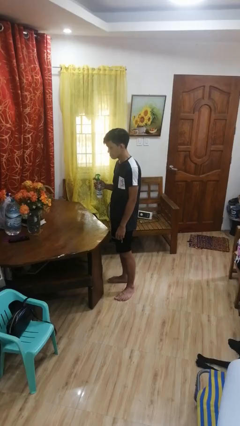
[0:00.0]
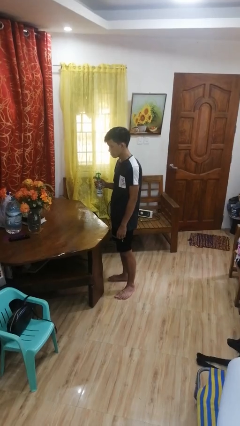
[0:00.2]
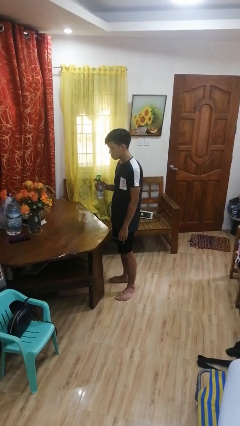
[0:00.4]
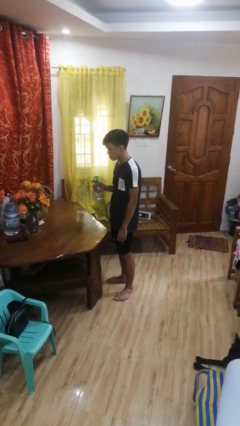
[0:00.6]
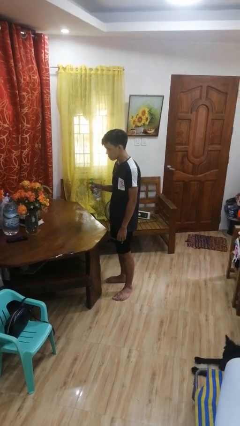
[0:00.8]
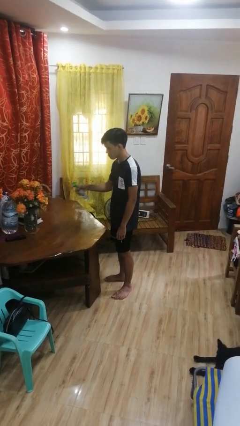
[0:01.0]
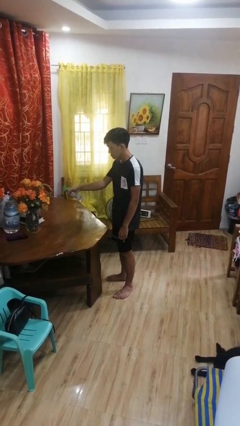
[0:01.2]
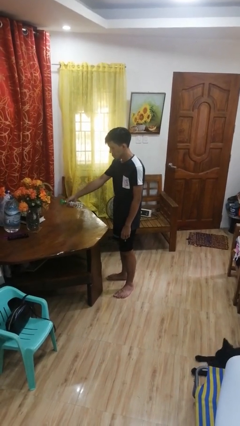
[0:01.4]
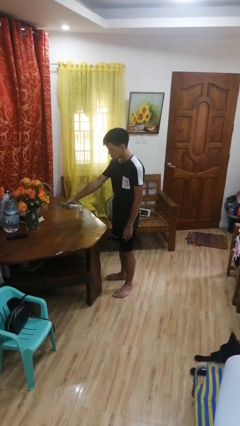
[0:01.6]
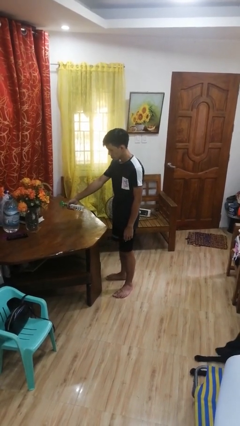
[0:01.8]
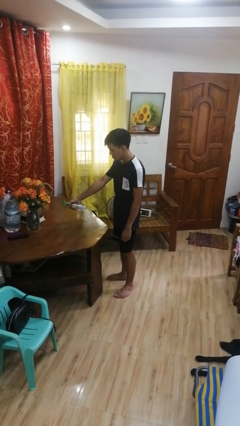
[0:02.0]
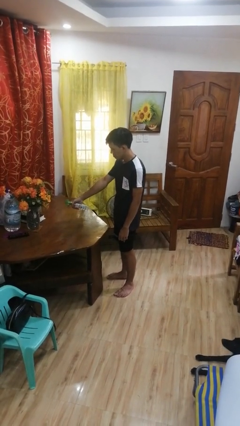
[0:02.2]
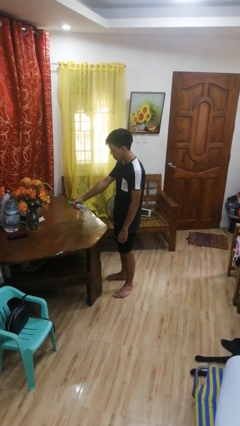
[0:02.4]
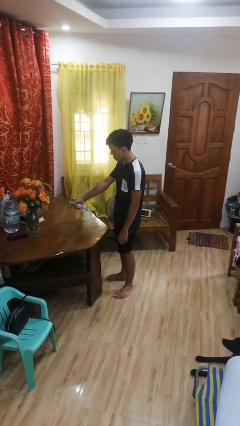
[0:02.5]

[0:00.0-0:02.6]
person sprays from bottle

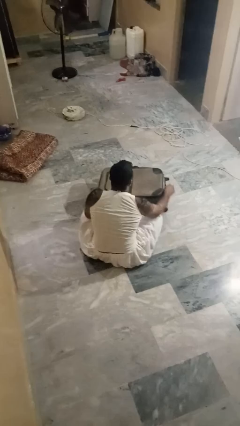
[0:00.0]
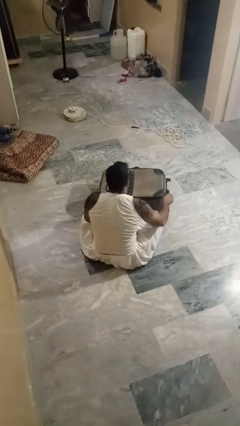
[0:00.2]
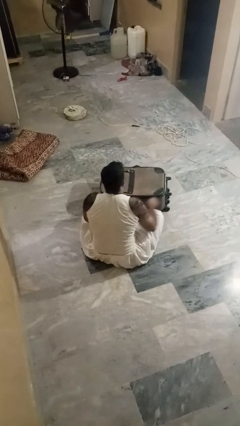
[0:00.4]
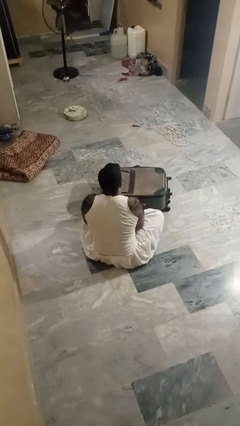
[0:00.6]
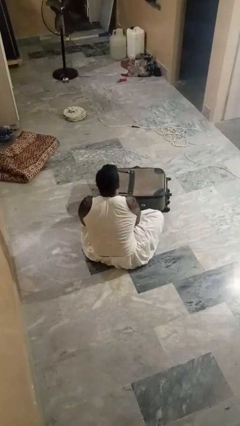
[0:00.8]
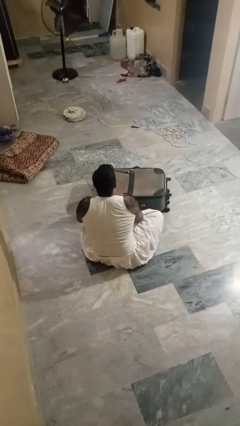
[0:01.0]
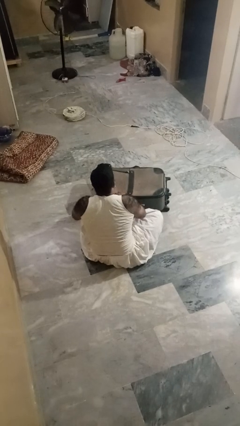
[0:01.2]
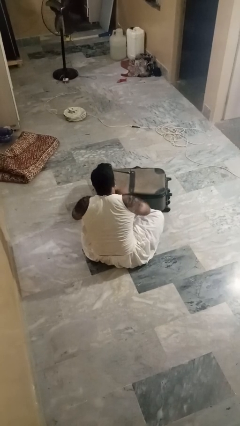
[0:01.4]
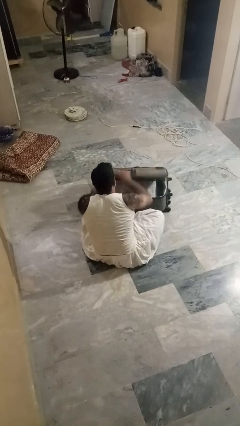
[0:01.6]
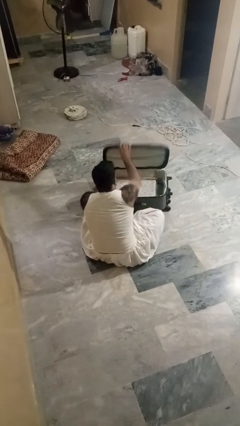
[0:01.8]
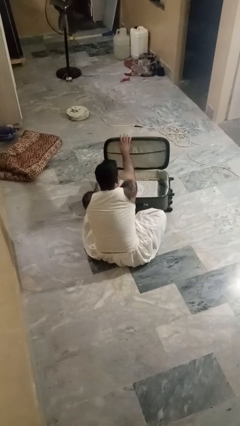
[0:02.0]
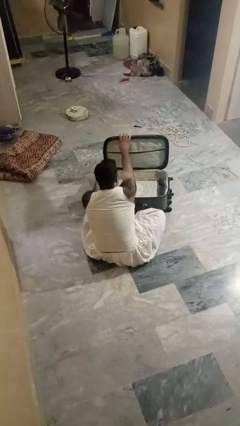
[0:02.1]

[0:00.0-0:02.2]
person opens suitcase

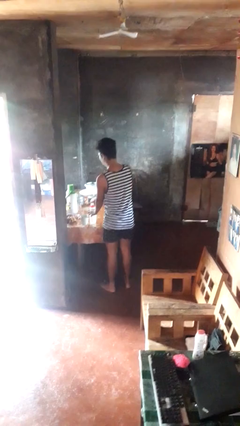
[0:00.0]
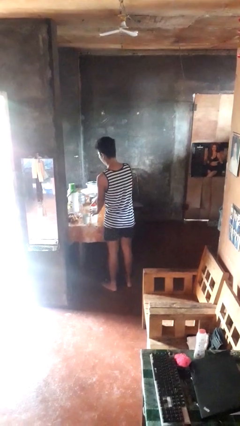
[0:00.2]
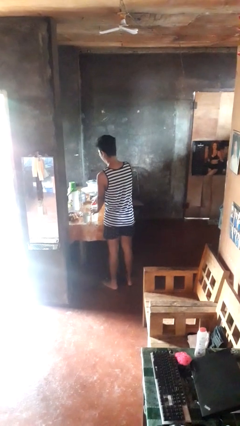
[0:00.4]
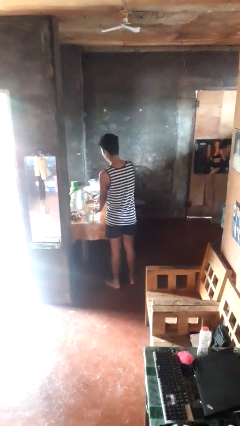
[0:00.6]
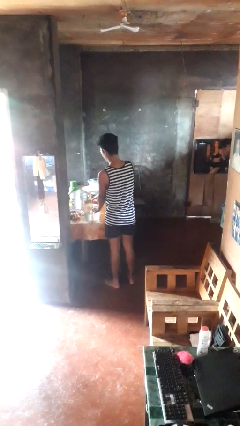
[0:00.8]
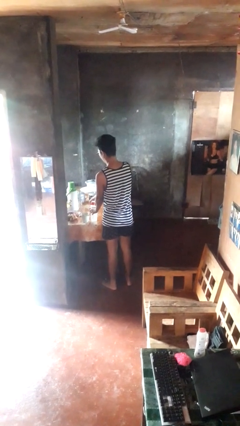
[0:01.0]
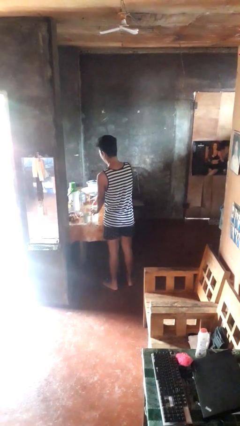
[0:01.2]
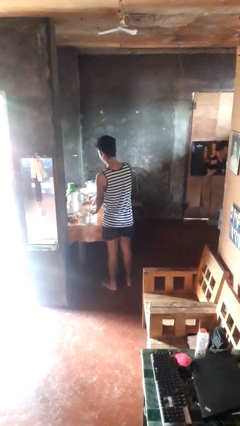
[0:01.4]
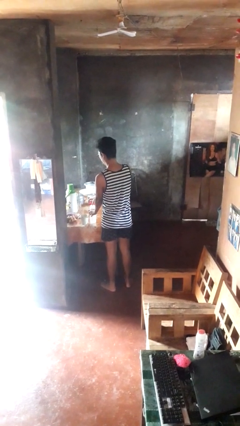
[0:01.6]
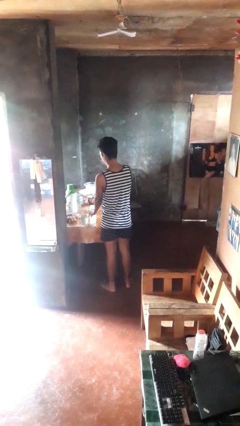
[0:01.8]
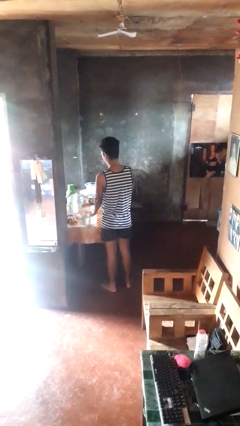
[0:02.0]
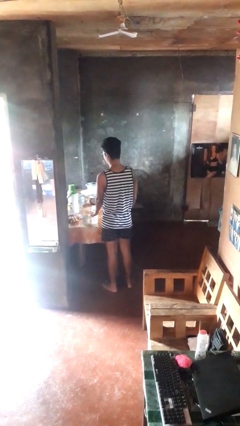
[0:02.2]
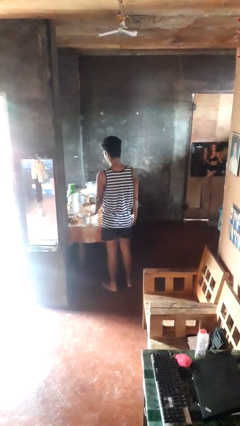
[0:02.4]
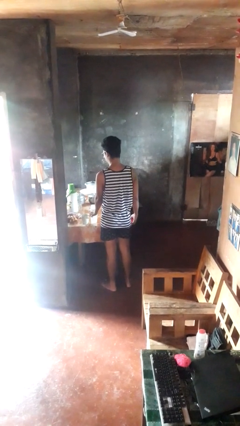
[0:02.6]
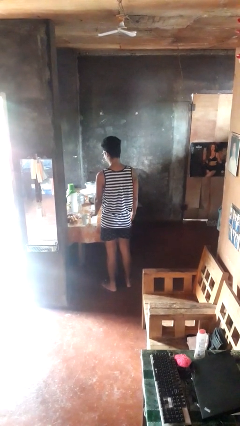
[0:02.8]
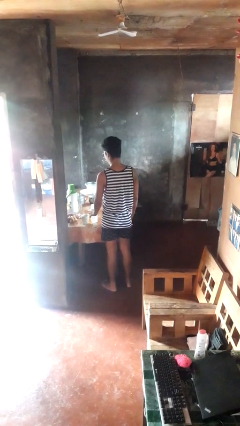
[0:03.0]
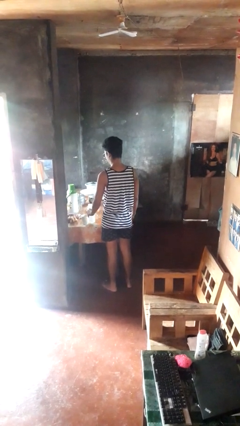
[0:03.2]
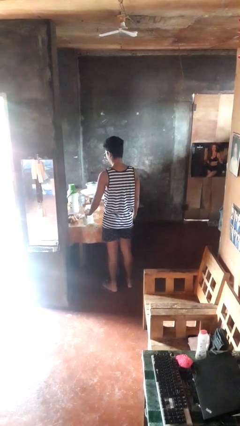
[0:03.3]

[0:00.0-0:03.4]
person unscrews lid from bottle

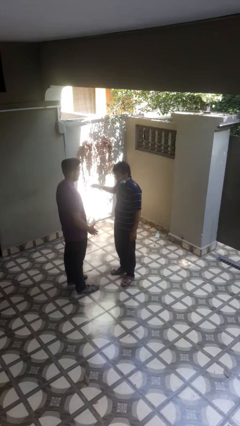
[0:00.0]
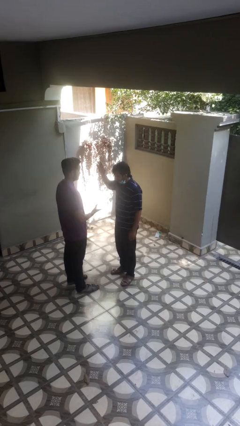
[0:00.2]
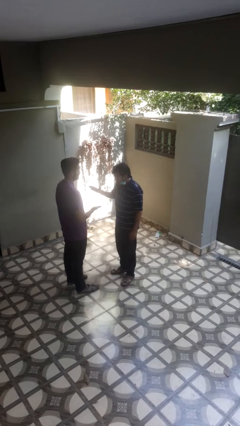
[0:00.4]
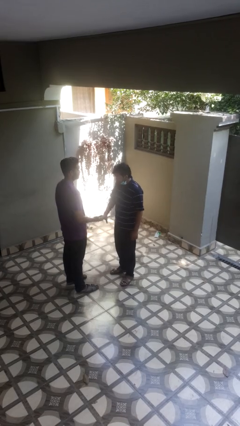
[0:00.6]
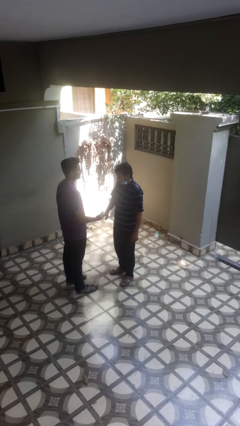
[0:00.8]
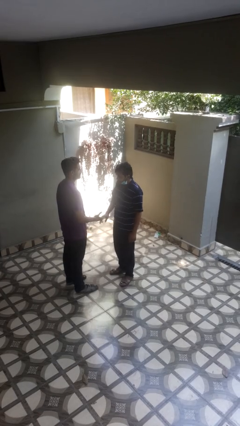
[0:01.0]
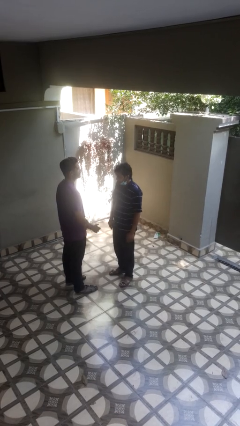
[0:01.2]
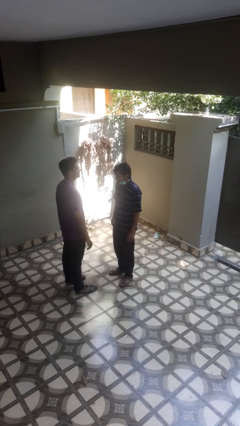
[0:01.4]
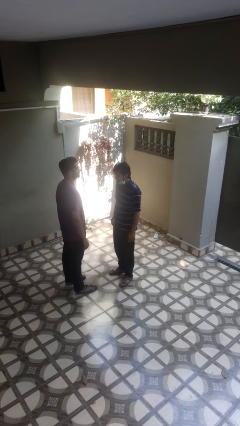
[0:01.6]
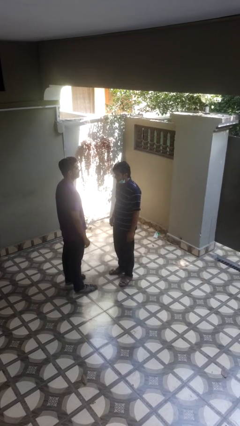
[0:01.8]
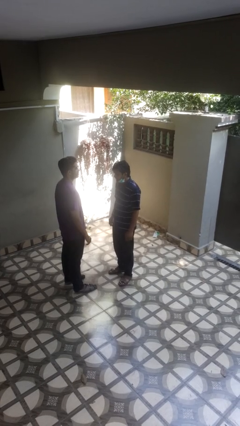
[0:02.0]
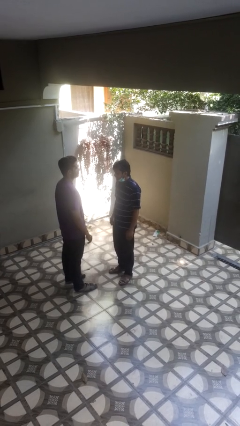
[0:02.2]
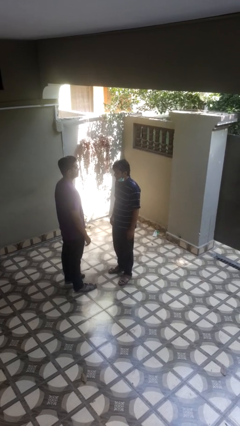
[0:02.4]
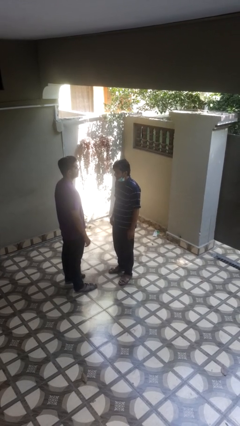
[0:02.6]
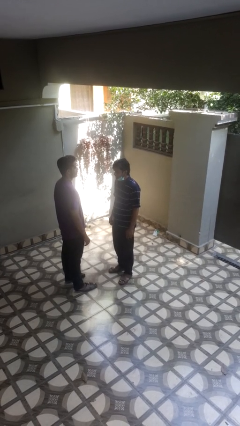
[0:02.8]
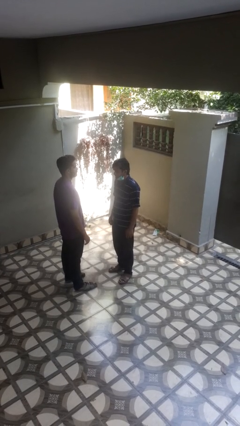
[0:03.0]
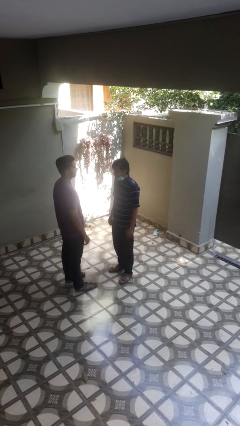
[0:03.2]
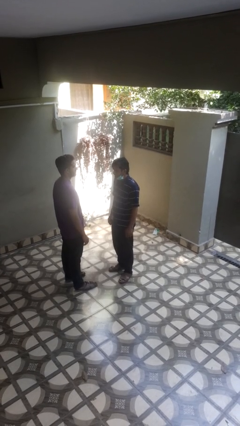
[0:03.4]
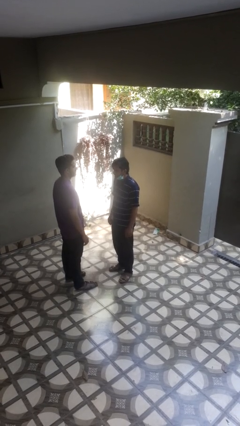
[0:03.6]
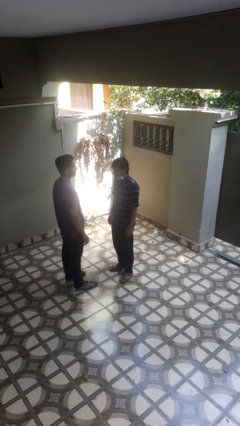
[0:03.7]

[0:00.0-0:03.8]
person highfives hand

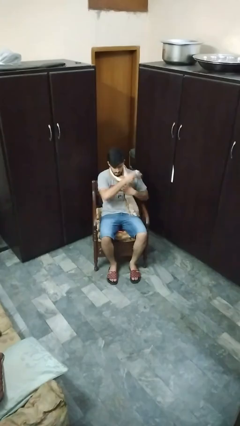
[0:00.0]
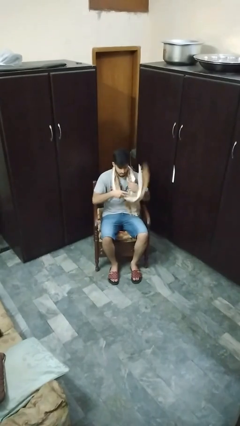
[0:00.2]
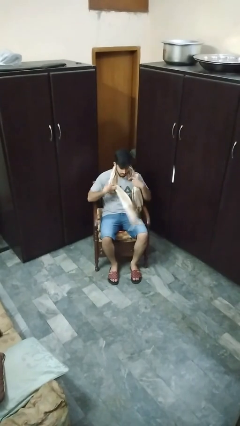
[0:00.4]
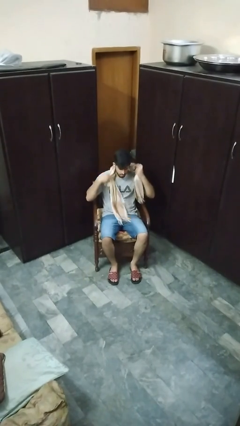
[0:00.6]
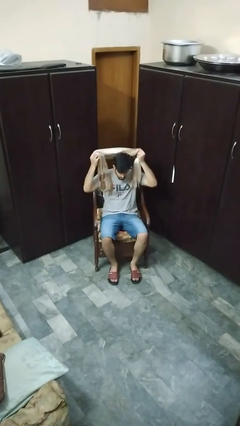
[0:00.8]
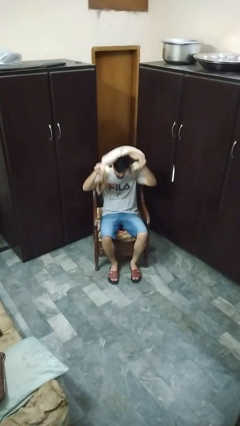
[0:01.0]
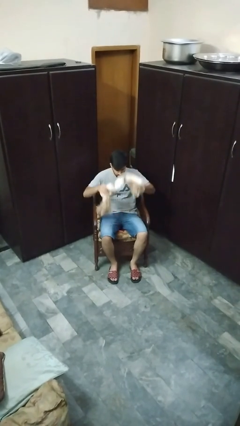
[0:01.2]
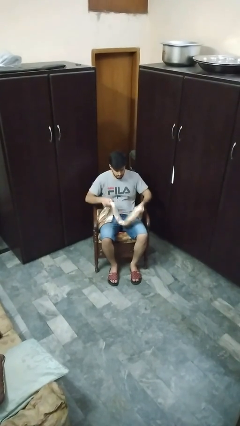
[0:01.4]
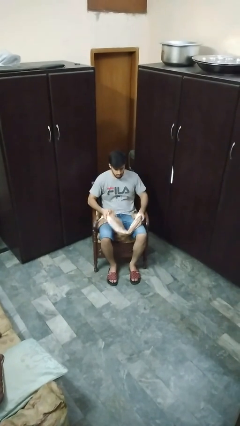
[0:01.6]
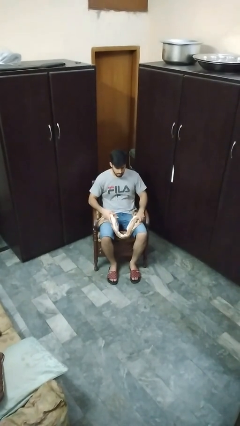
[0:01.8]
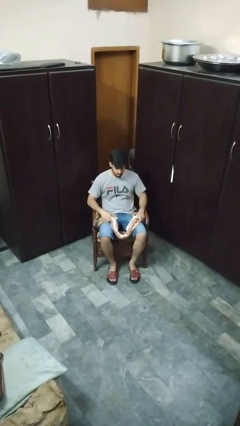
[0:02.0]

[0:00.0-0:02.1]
person takes off scarf

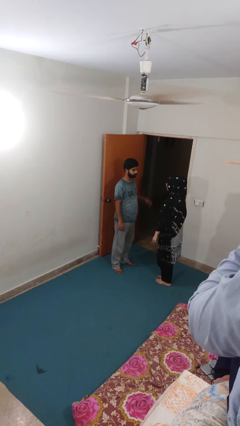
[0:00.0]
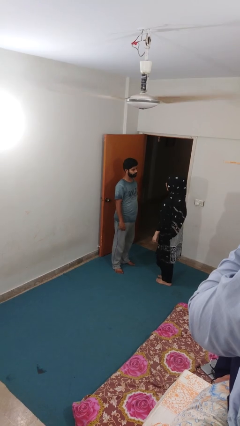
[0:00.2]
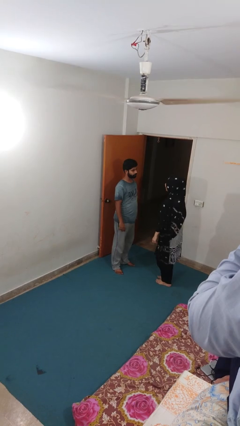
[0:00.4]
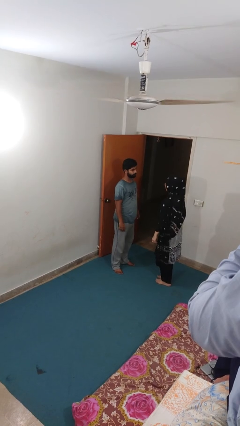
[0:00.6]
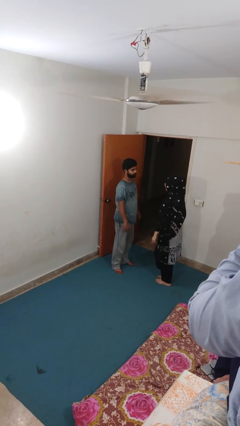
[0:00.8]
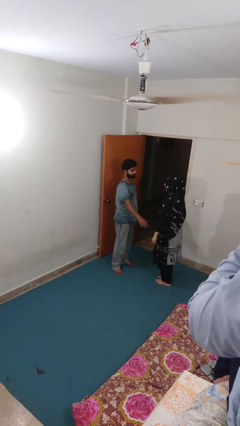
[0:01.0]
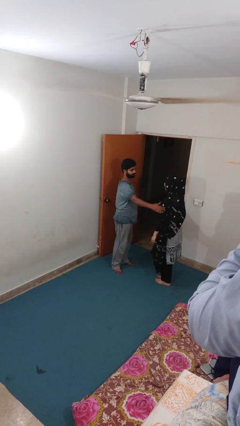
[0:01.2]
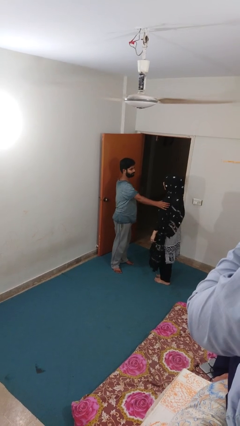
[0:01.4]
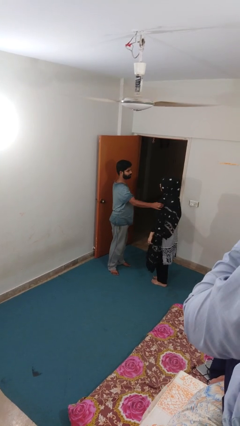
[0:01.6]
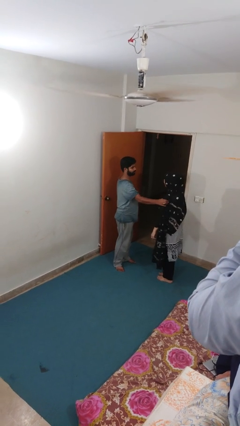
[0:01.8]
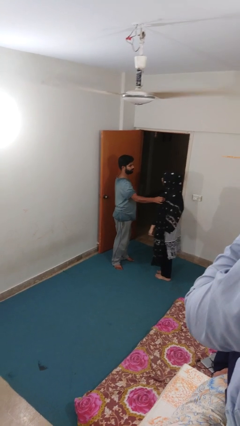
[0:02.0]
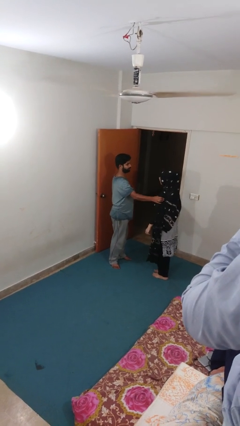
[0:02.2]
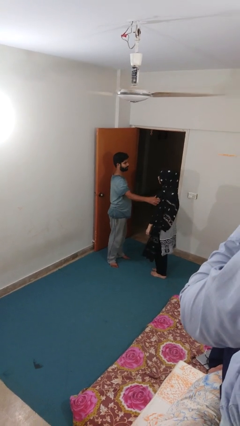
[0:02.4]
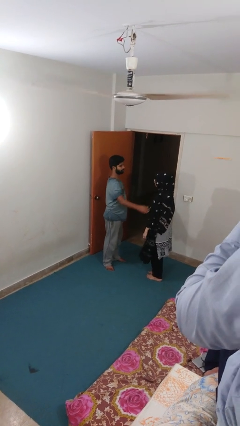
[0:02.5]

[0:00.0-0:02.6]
person grabs person by bicep

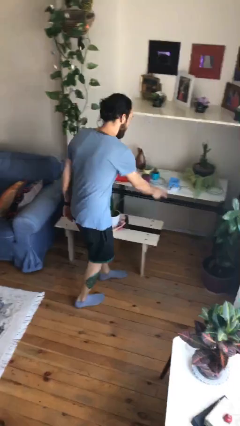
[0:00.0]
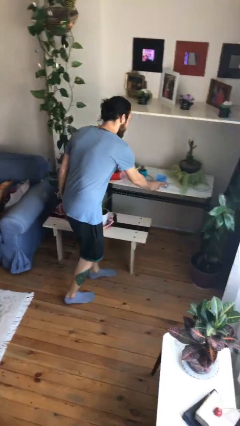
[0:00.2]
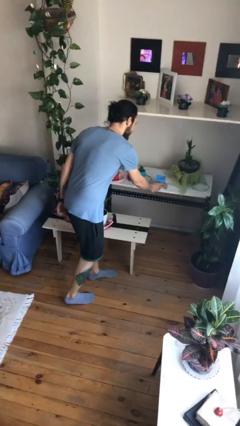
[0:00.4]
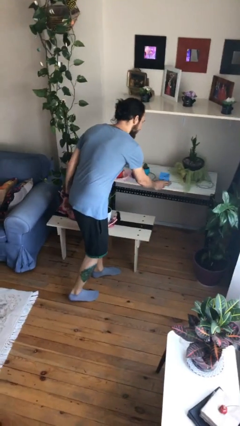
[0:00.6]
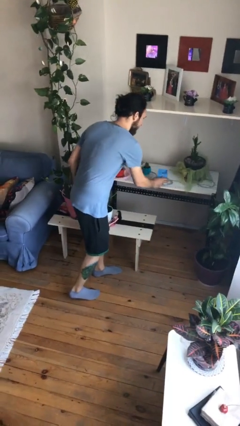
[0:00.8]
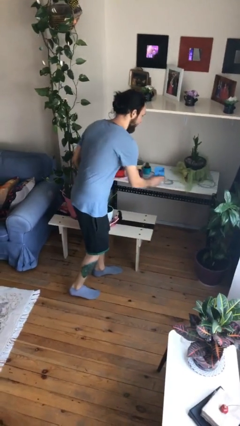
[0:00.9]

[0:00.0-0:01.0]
person picks up object from table
